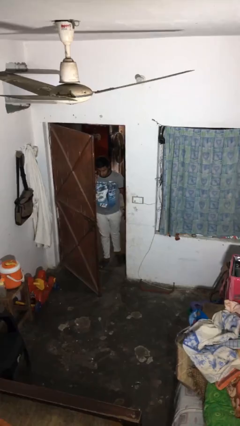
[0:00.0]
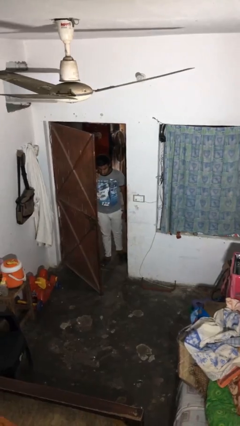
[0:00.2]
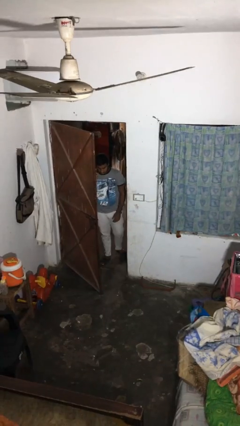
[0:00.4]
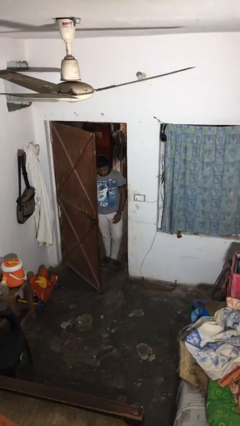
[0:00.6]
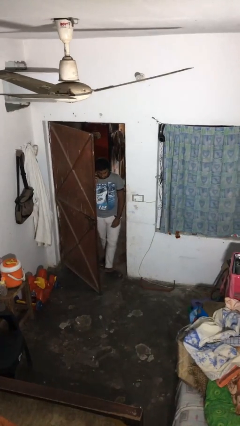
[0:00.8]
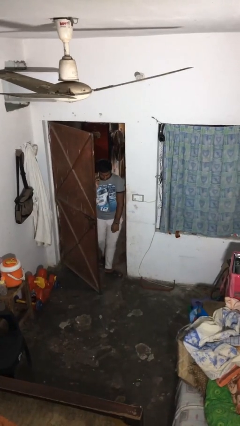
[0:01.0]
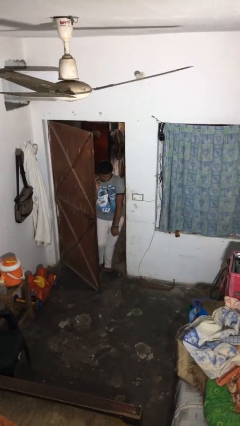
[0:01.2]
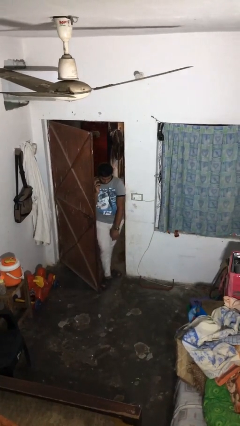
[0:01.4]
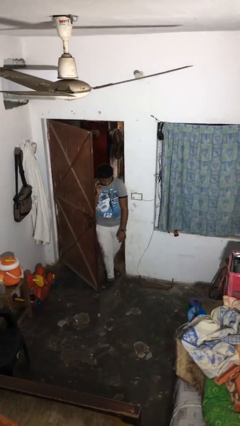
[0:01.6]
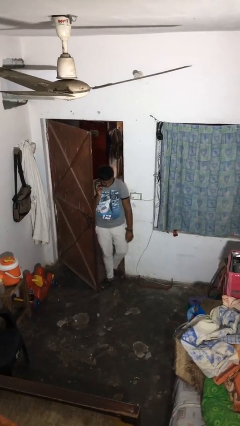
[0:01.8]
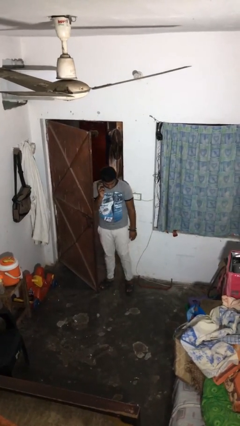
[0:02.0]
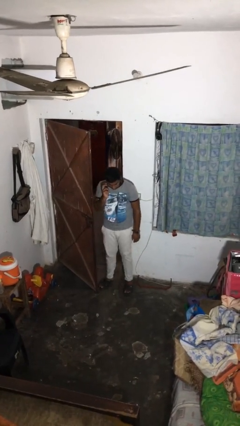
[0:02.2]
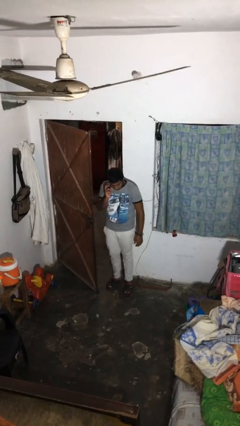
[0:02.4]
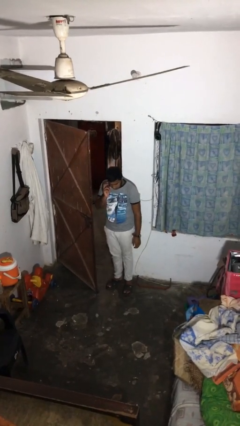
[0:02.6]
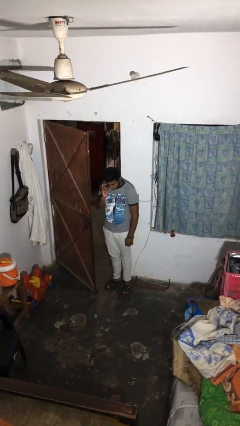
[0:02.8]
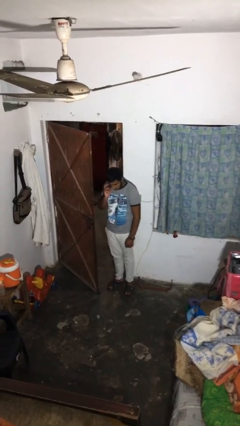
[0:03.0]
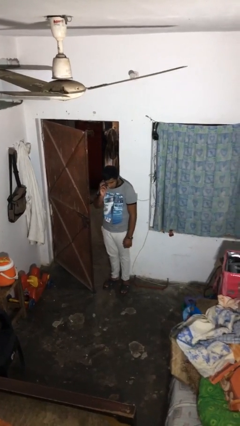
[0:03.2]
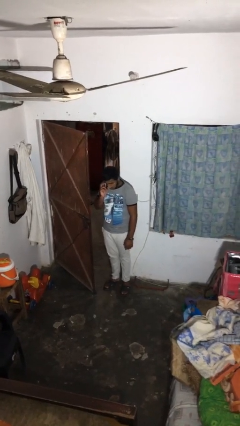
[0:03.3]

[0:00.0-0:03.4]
person enters scene through structure

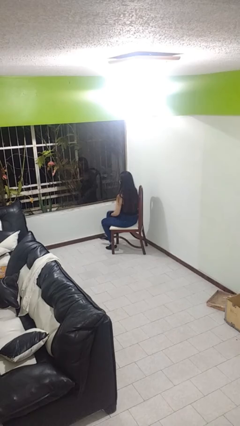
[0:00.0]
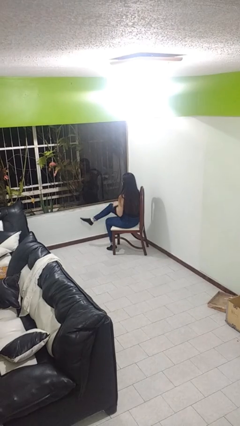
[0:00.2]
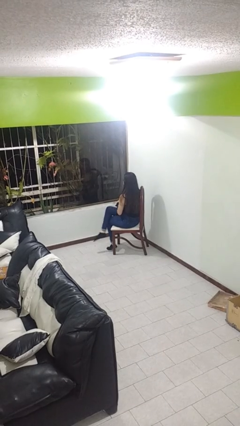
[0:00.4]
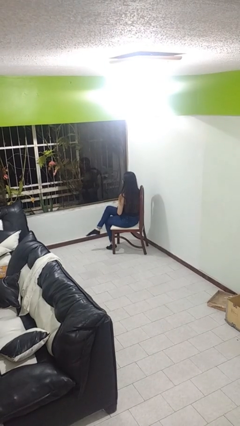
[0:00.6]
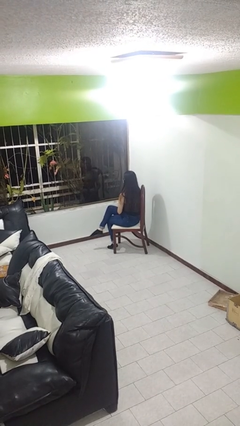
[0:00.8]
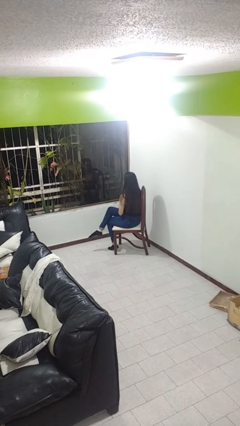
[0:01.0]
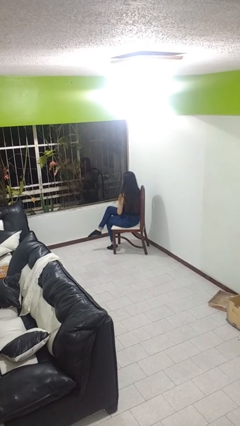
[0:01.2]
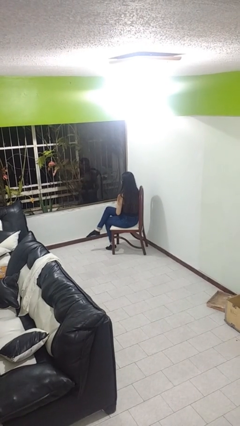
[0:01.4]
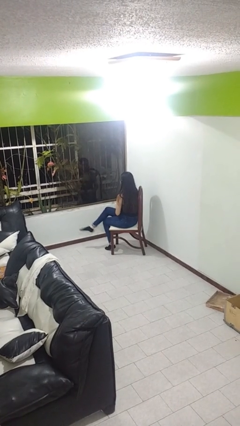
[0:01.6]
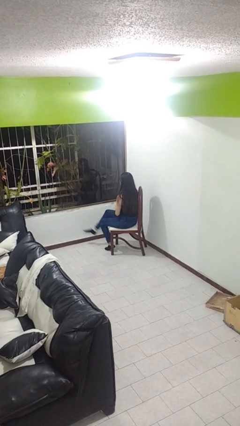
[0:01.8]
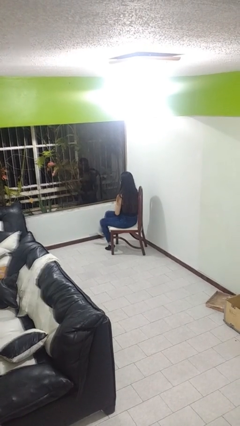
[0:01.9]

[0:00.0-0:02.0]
person crosses legs

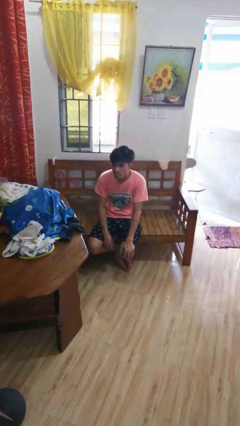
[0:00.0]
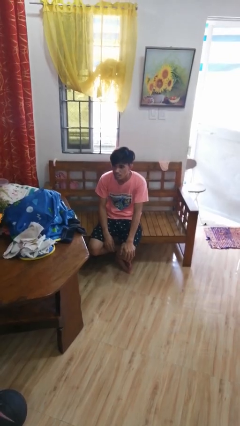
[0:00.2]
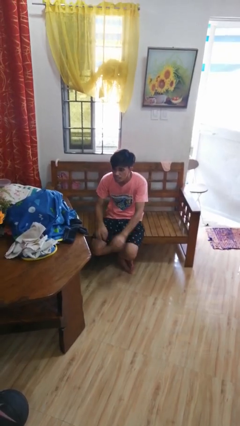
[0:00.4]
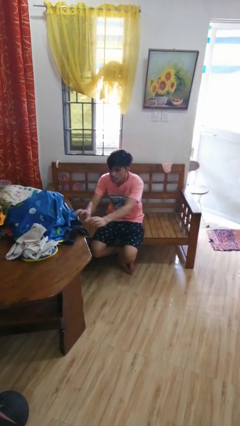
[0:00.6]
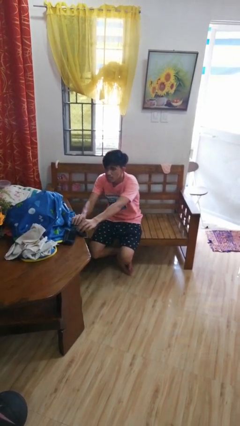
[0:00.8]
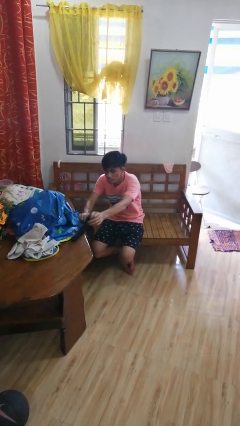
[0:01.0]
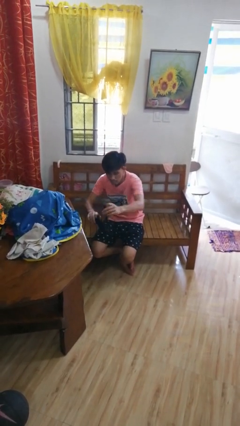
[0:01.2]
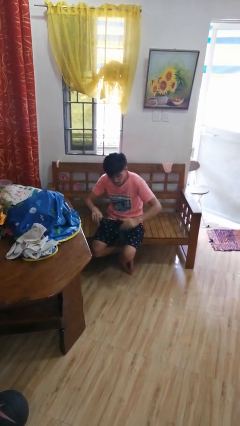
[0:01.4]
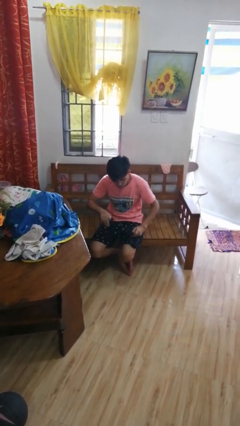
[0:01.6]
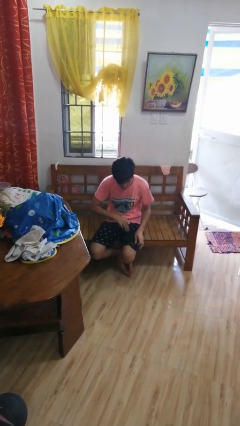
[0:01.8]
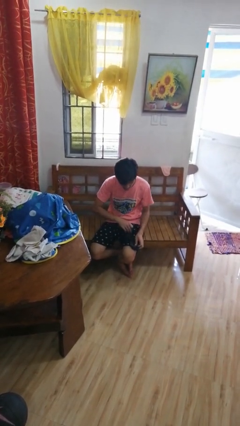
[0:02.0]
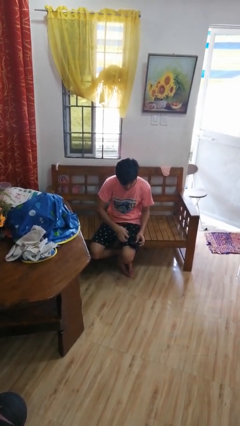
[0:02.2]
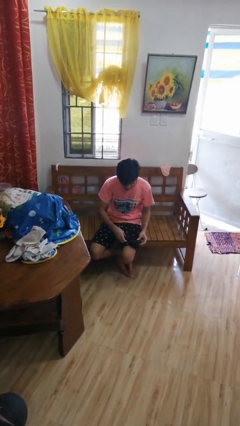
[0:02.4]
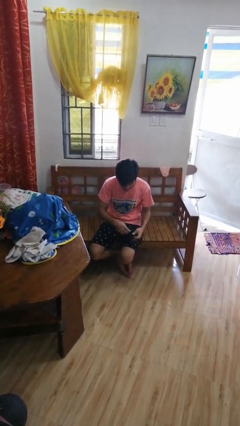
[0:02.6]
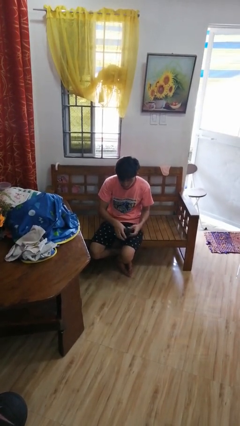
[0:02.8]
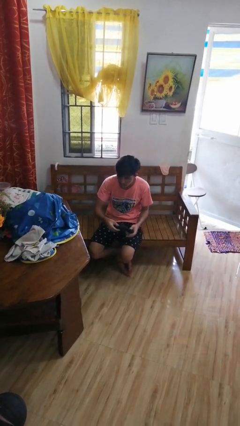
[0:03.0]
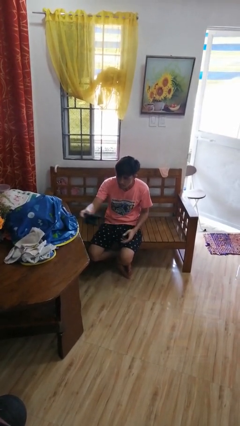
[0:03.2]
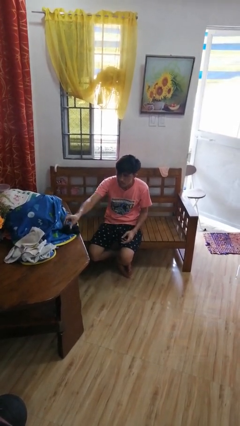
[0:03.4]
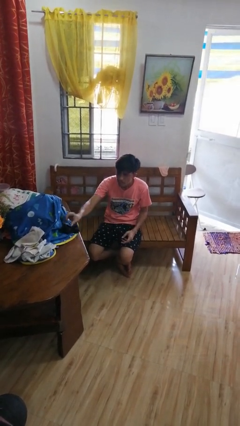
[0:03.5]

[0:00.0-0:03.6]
person folds socks

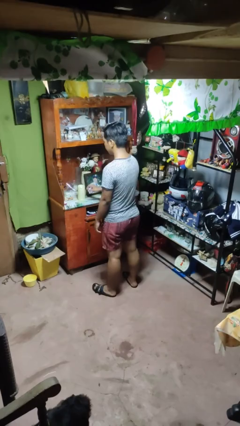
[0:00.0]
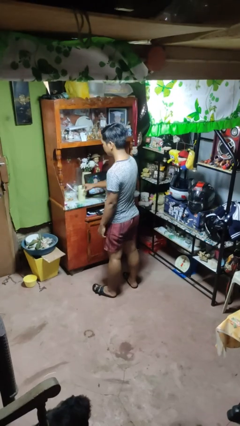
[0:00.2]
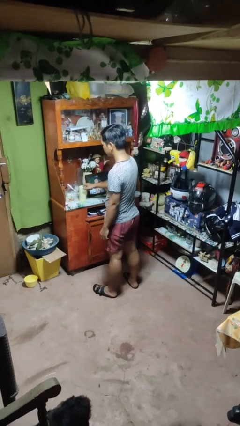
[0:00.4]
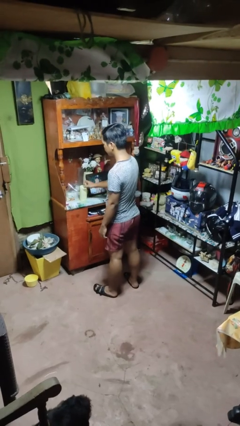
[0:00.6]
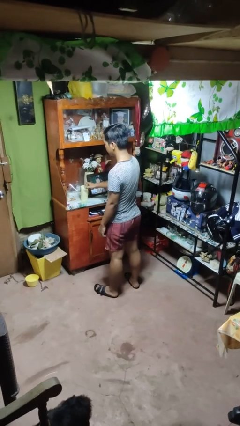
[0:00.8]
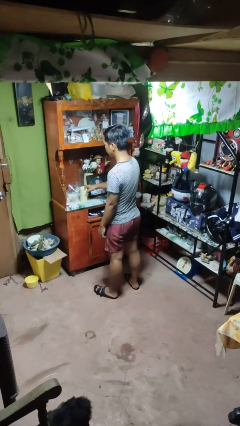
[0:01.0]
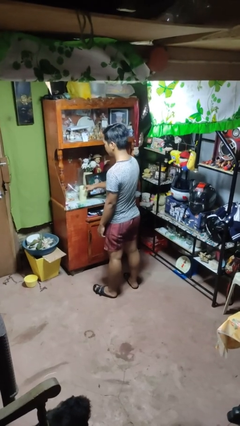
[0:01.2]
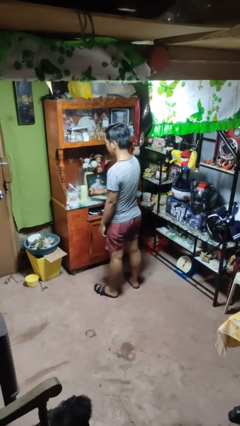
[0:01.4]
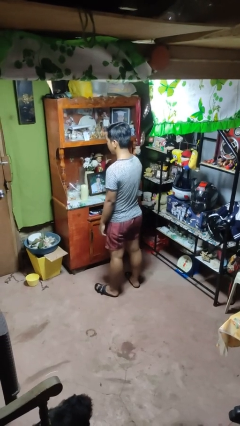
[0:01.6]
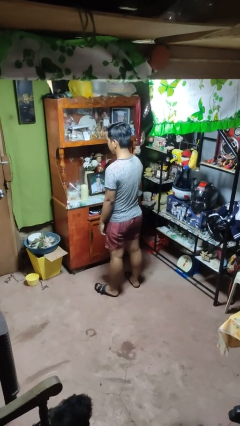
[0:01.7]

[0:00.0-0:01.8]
person taps object with finger

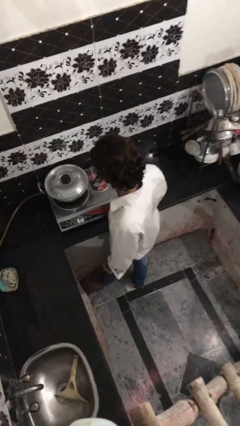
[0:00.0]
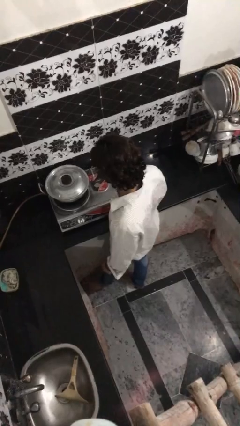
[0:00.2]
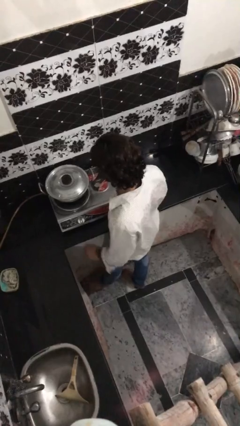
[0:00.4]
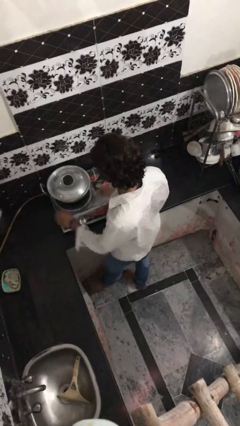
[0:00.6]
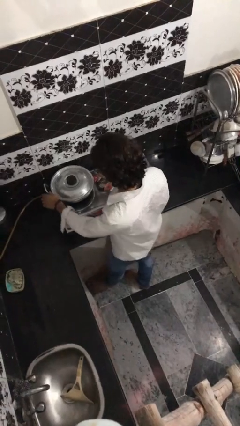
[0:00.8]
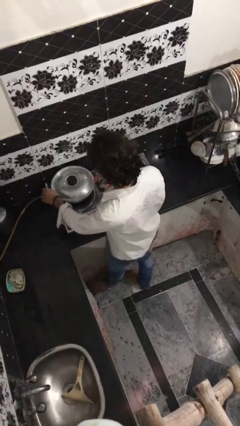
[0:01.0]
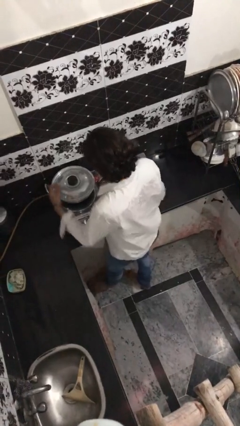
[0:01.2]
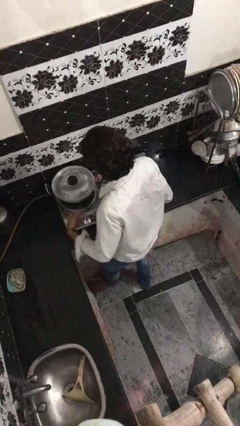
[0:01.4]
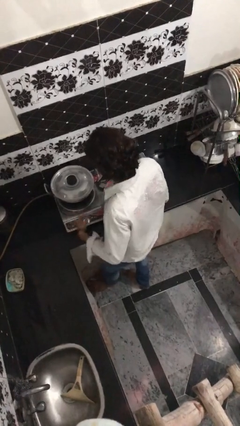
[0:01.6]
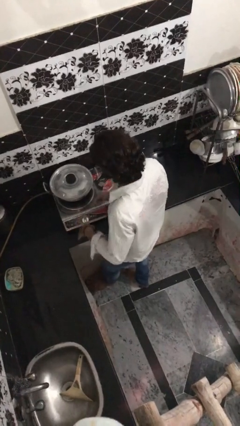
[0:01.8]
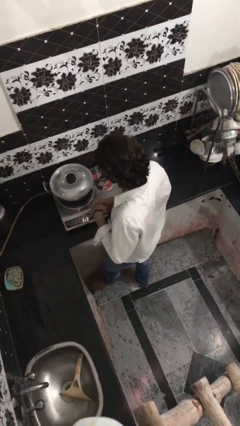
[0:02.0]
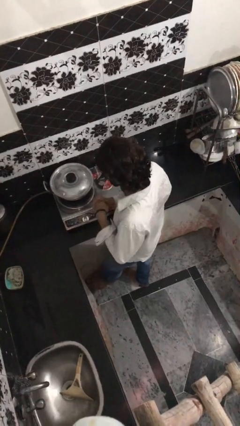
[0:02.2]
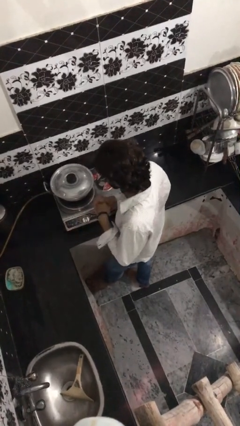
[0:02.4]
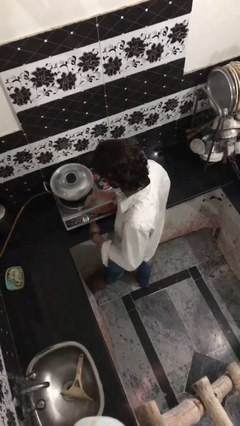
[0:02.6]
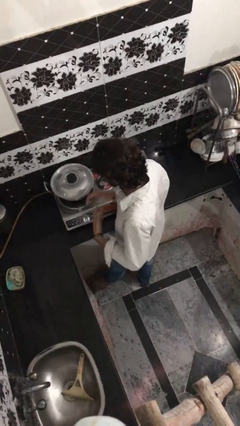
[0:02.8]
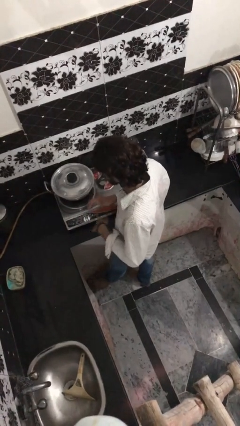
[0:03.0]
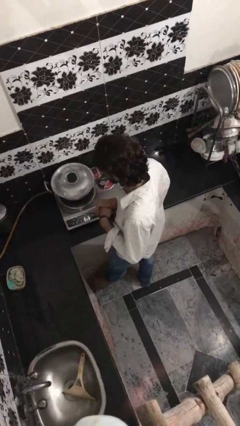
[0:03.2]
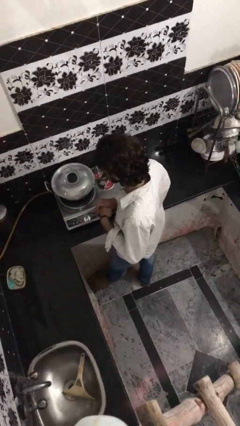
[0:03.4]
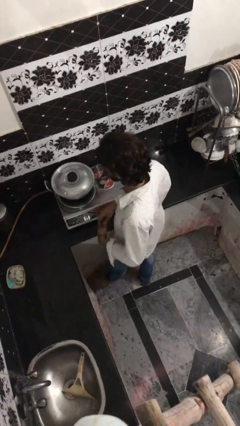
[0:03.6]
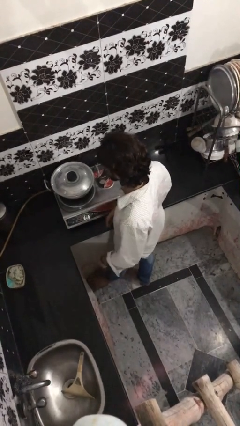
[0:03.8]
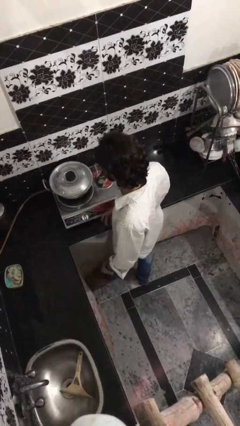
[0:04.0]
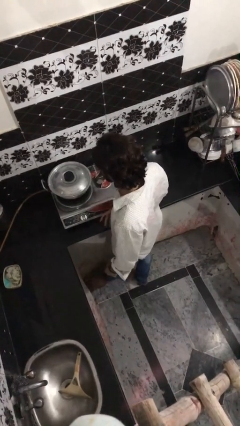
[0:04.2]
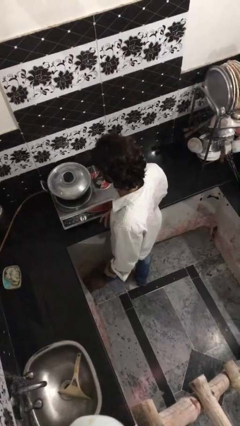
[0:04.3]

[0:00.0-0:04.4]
person burns hand

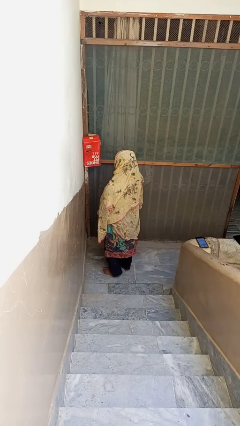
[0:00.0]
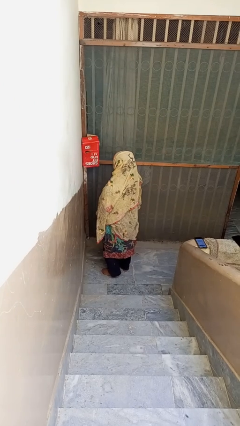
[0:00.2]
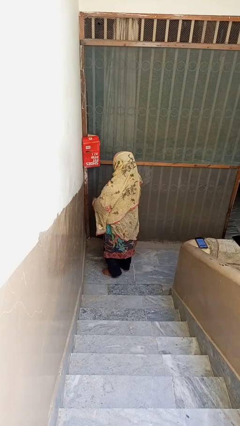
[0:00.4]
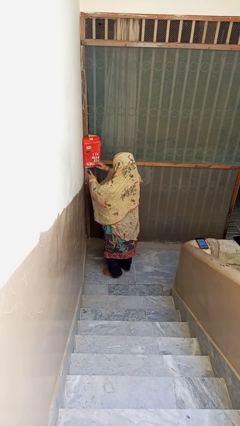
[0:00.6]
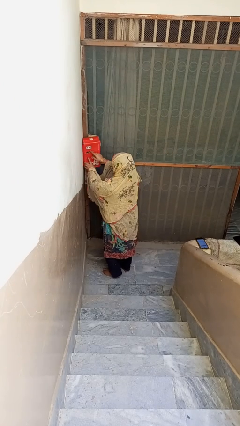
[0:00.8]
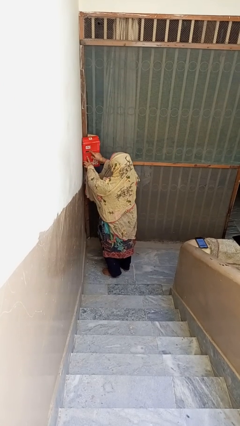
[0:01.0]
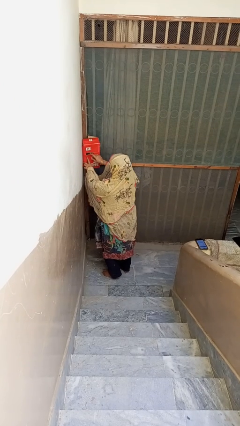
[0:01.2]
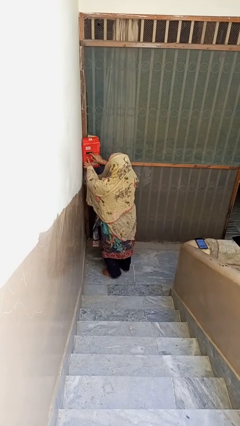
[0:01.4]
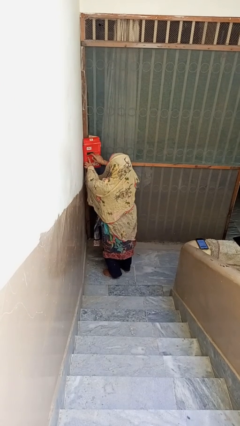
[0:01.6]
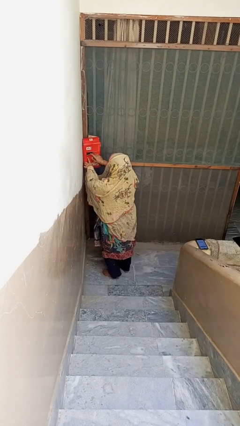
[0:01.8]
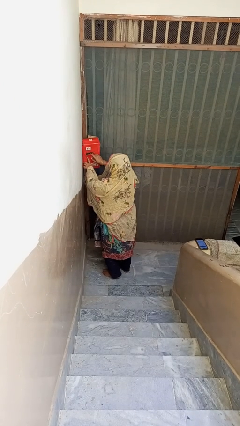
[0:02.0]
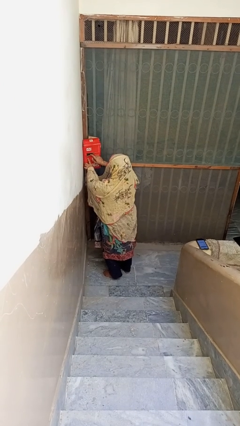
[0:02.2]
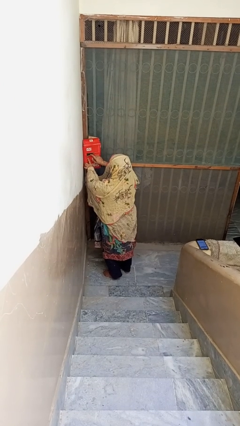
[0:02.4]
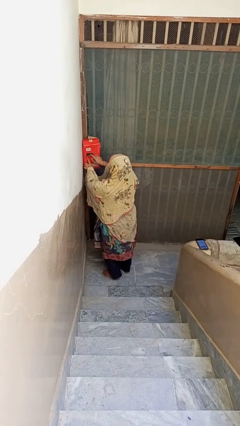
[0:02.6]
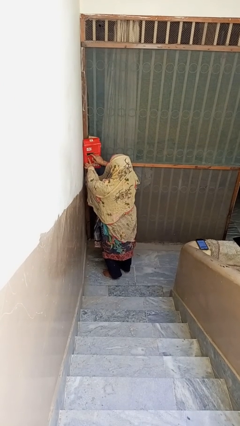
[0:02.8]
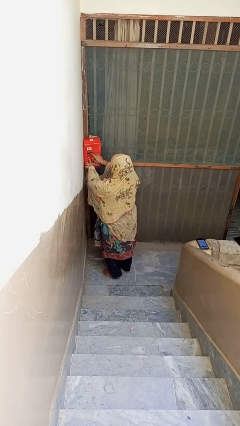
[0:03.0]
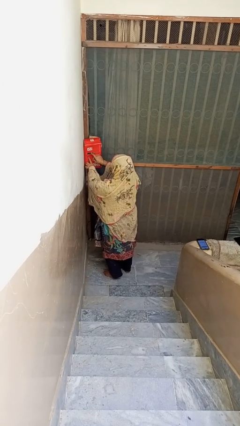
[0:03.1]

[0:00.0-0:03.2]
person opens mailbox
